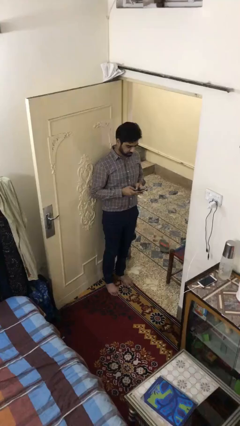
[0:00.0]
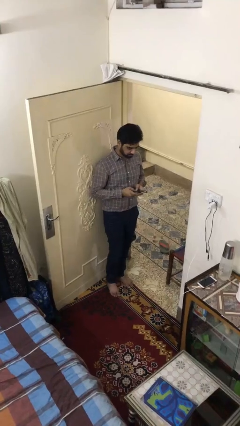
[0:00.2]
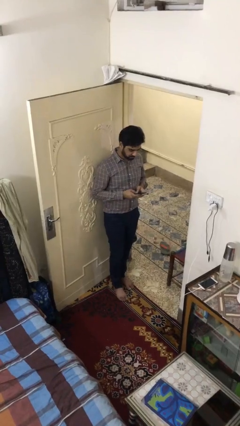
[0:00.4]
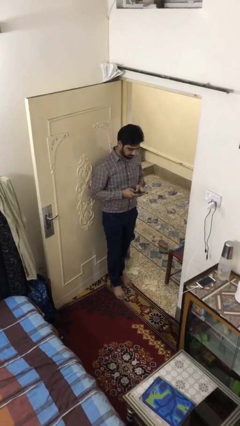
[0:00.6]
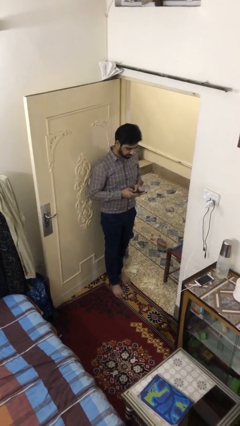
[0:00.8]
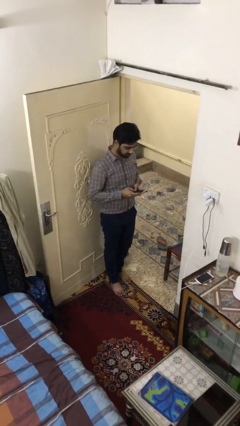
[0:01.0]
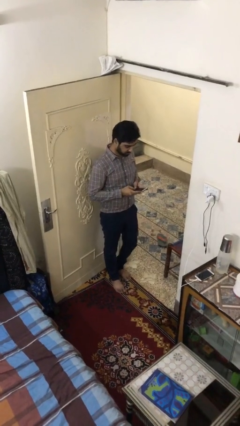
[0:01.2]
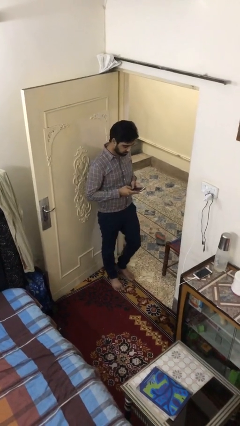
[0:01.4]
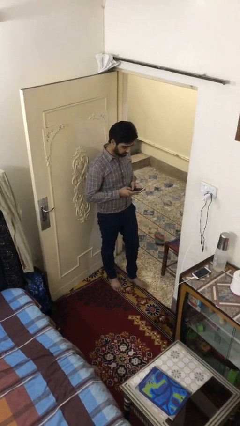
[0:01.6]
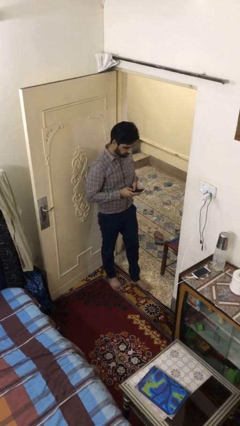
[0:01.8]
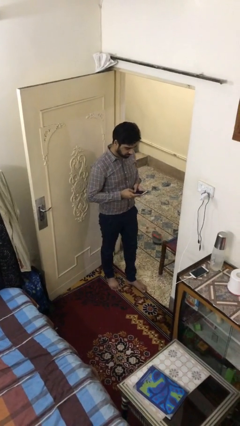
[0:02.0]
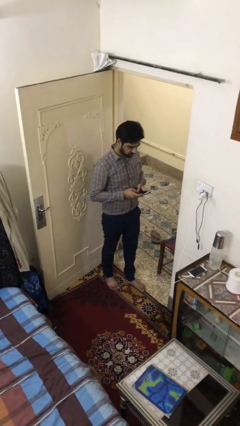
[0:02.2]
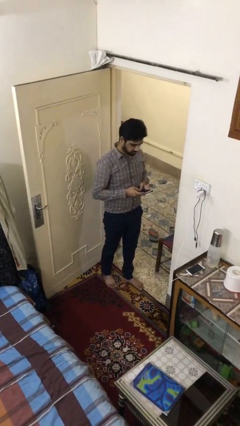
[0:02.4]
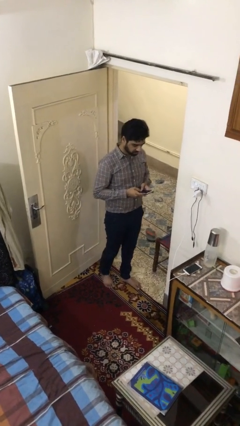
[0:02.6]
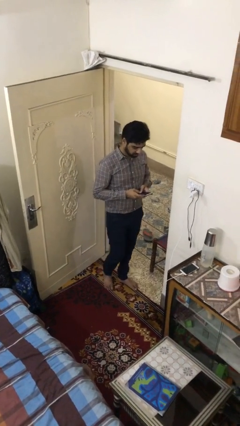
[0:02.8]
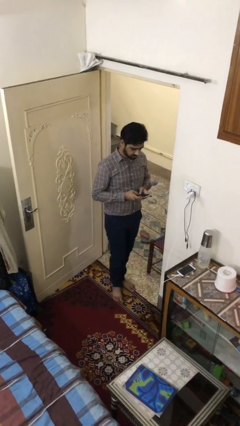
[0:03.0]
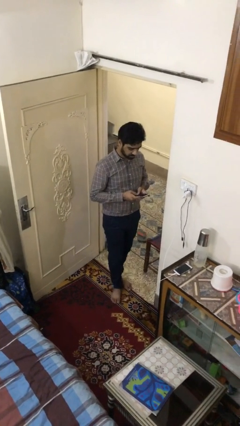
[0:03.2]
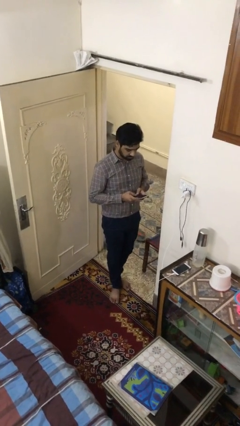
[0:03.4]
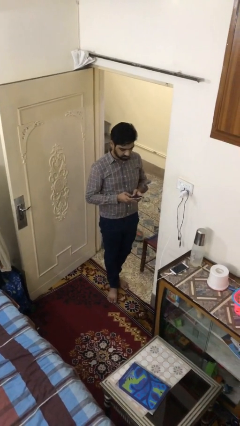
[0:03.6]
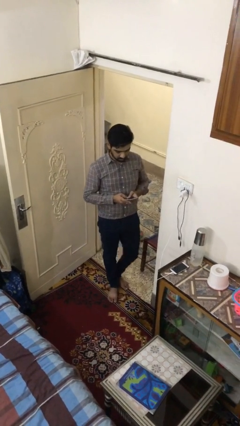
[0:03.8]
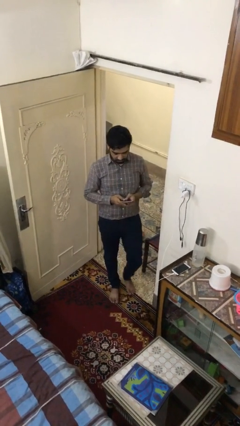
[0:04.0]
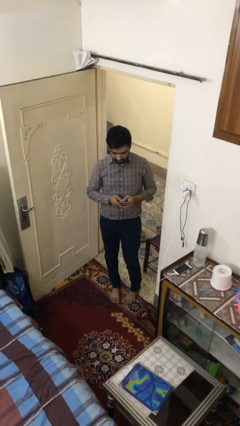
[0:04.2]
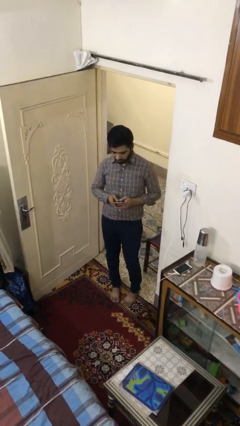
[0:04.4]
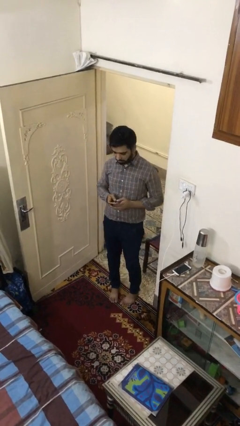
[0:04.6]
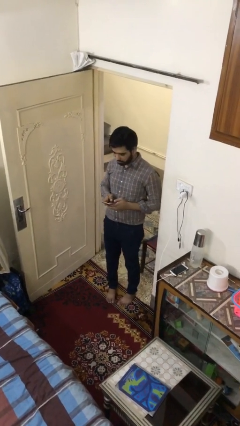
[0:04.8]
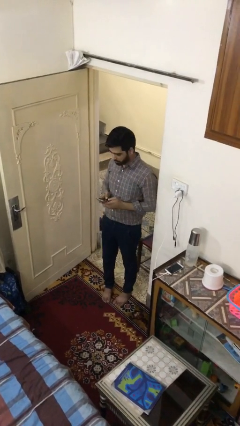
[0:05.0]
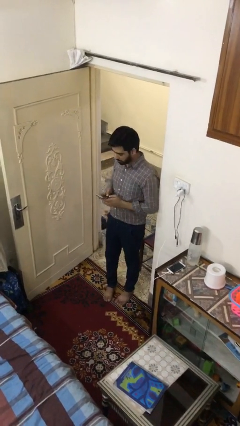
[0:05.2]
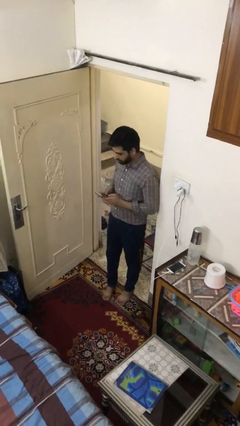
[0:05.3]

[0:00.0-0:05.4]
person texts on phone

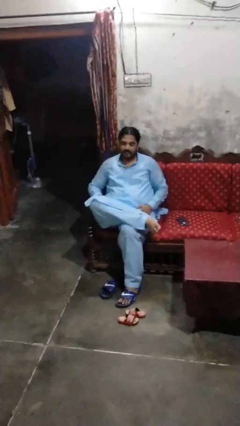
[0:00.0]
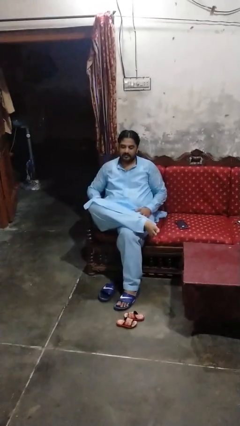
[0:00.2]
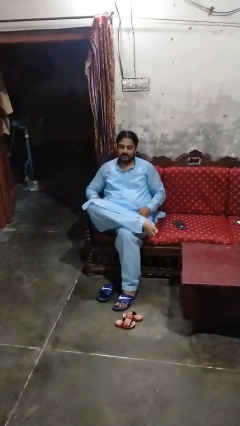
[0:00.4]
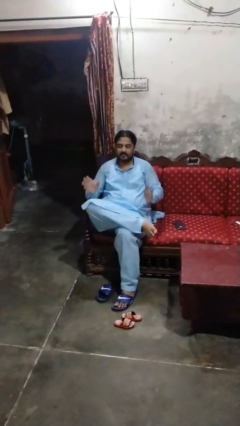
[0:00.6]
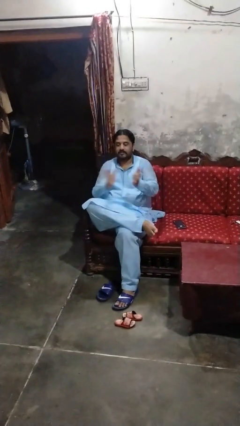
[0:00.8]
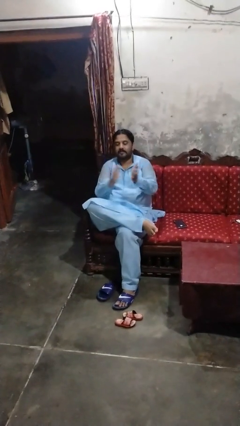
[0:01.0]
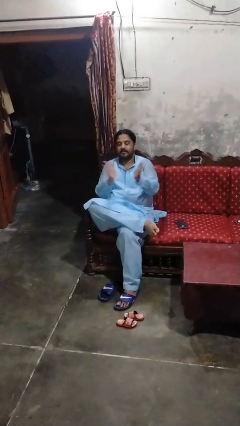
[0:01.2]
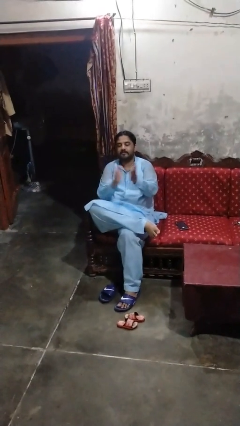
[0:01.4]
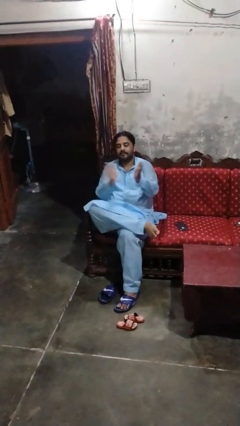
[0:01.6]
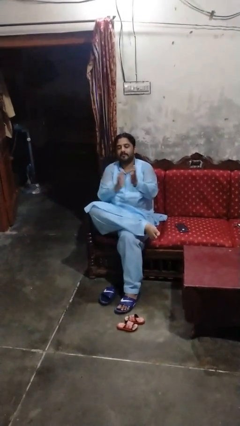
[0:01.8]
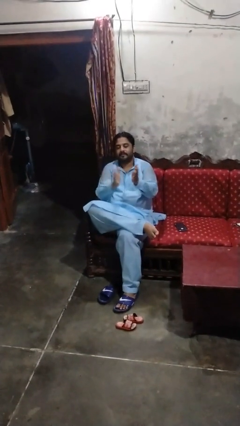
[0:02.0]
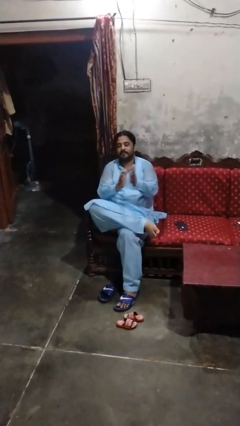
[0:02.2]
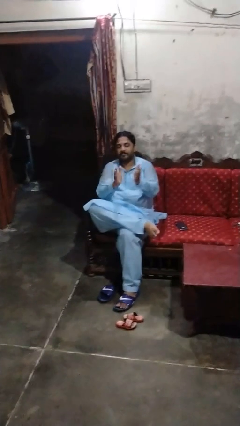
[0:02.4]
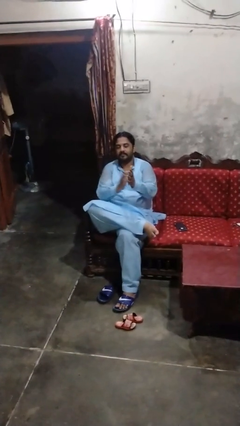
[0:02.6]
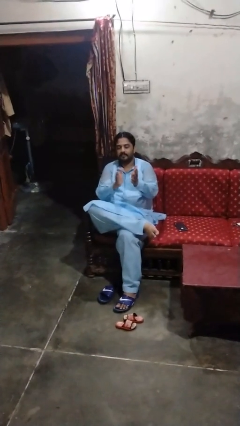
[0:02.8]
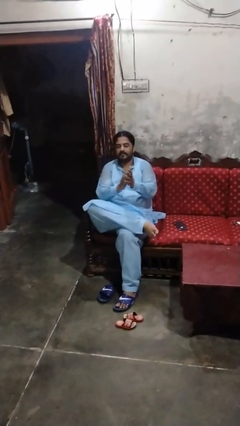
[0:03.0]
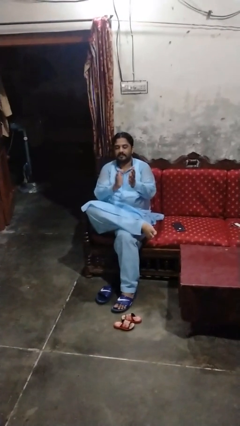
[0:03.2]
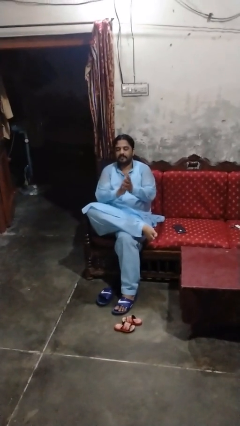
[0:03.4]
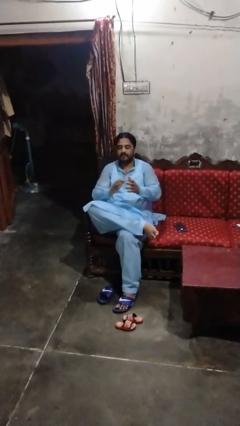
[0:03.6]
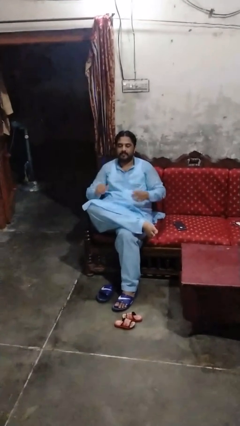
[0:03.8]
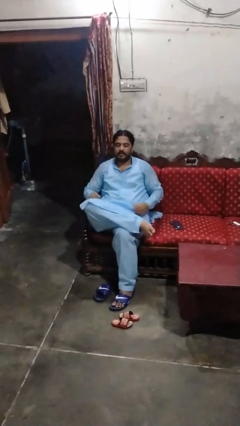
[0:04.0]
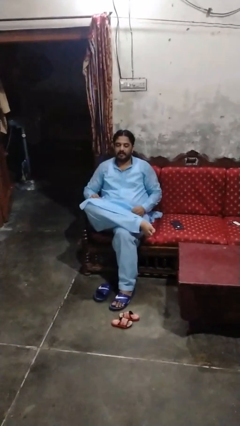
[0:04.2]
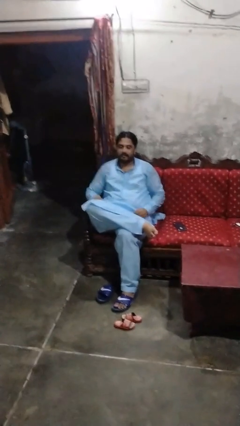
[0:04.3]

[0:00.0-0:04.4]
person claps hands

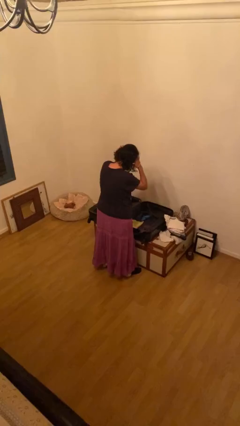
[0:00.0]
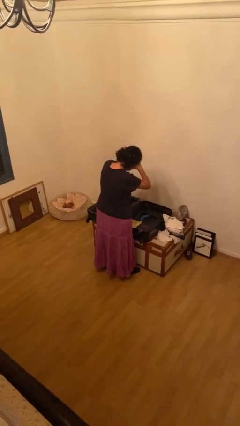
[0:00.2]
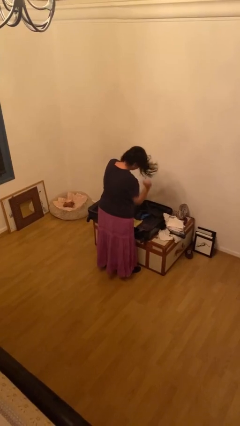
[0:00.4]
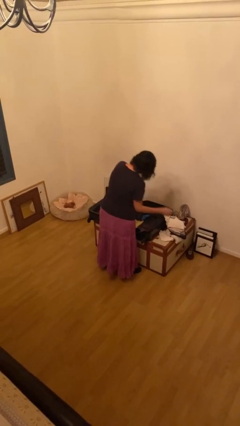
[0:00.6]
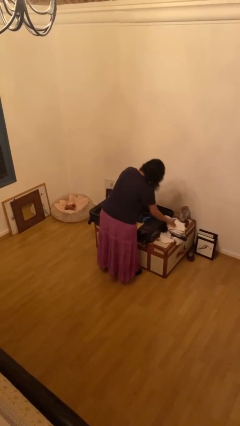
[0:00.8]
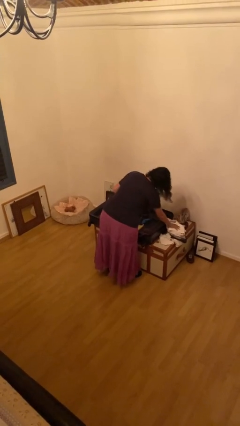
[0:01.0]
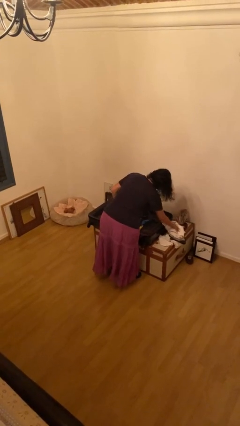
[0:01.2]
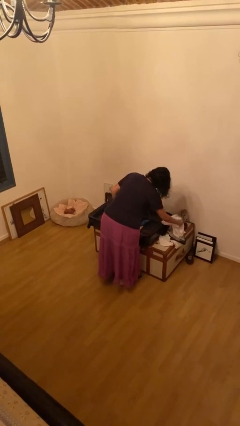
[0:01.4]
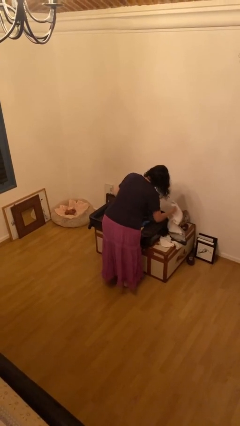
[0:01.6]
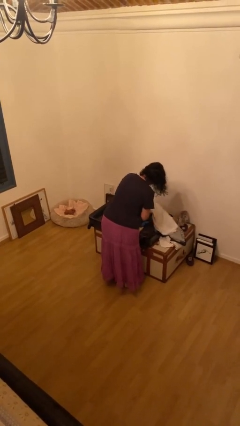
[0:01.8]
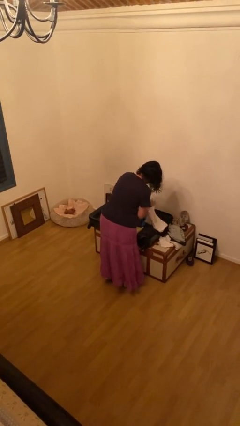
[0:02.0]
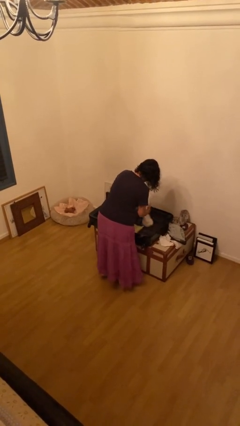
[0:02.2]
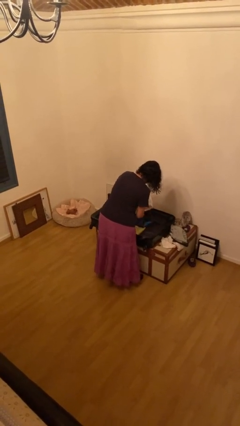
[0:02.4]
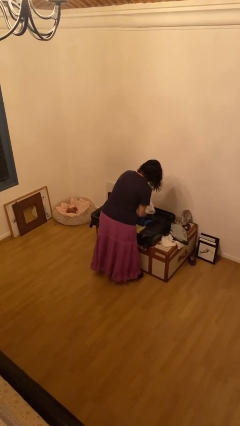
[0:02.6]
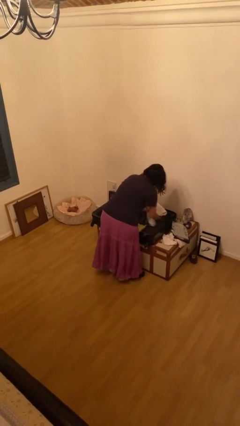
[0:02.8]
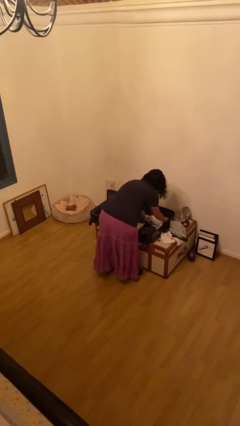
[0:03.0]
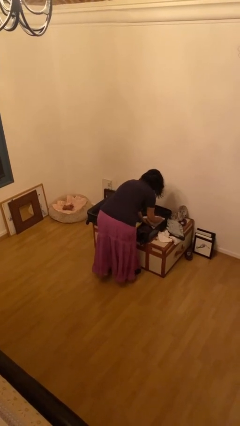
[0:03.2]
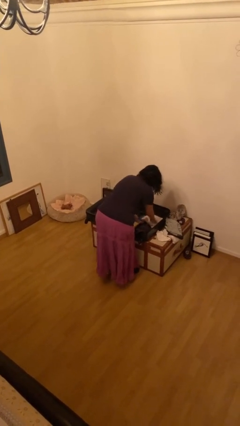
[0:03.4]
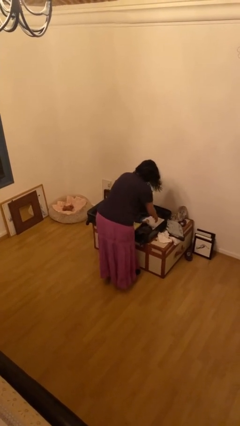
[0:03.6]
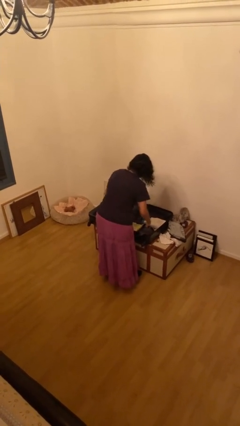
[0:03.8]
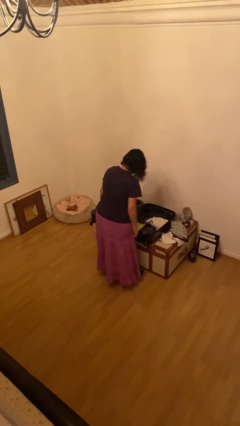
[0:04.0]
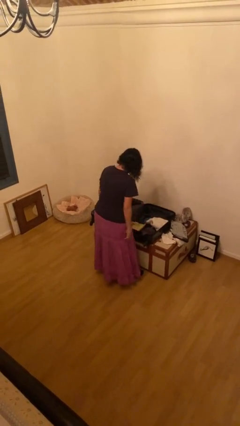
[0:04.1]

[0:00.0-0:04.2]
person unloads clothes from suitcase

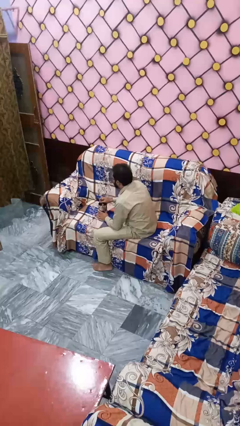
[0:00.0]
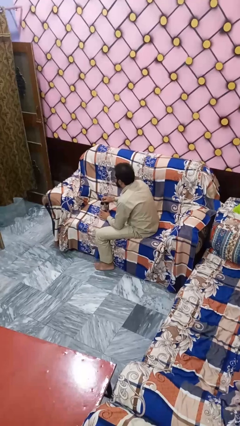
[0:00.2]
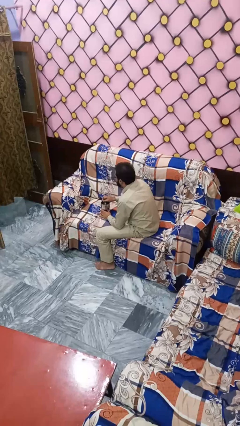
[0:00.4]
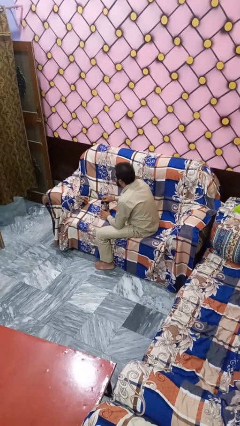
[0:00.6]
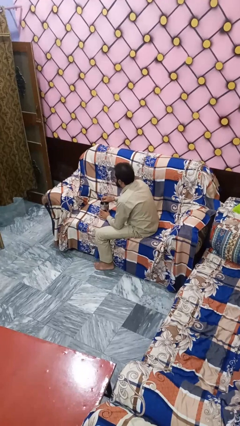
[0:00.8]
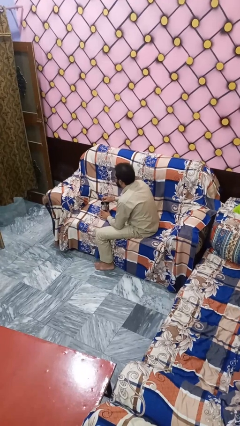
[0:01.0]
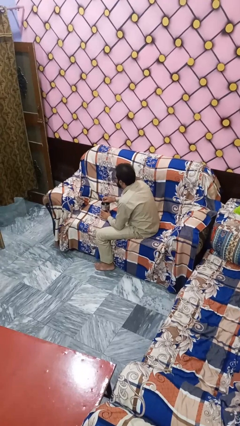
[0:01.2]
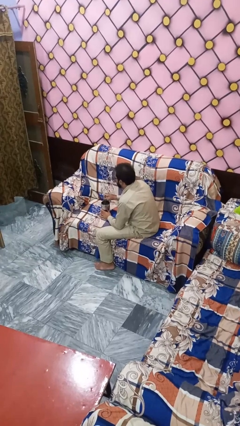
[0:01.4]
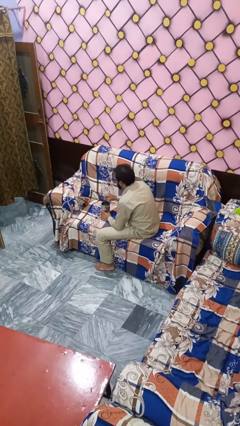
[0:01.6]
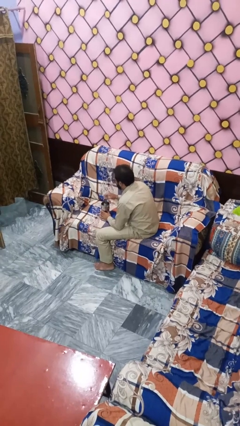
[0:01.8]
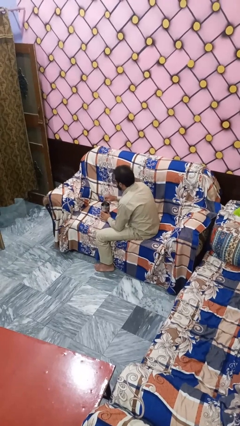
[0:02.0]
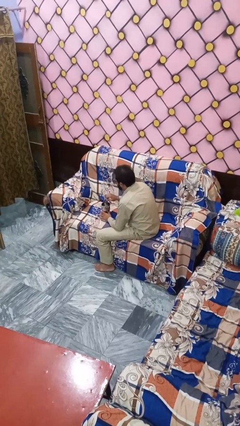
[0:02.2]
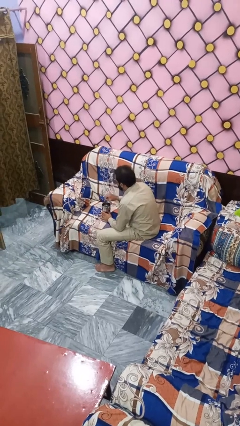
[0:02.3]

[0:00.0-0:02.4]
person stirs mug

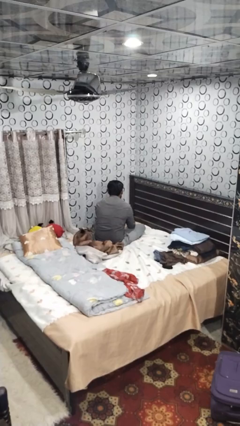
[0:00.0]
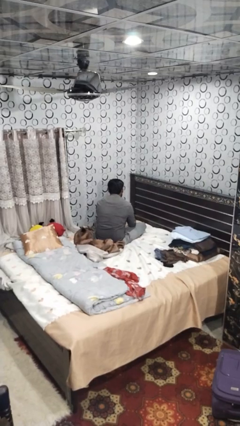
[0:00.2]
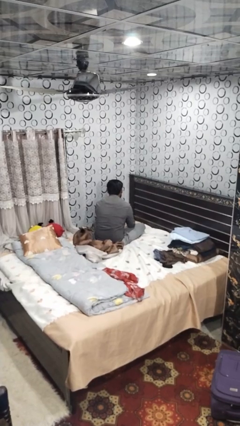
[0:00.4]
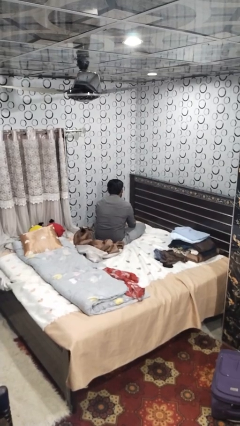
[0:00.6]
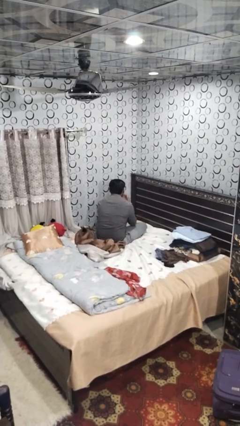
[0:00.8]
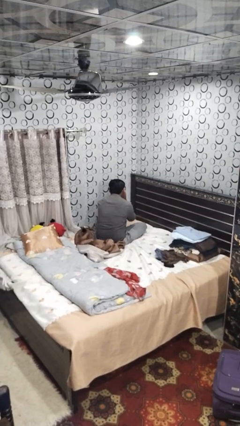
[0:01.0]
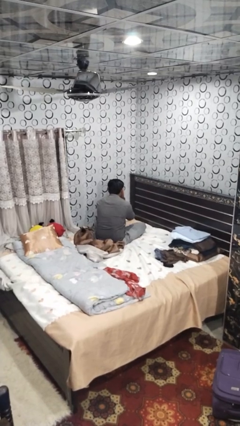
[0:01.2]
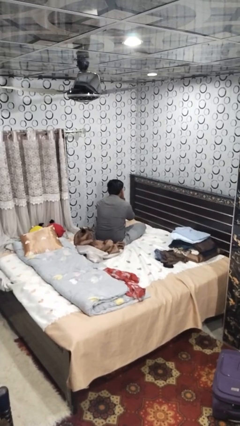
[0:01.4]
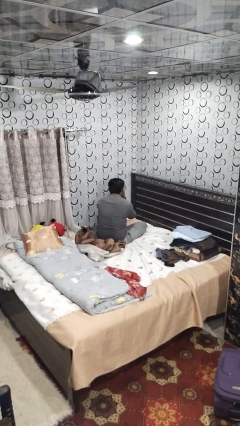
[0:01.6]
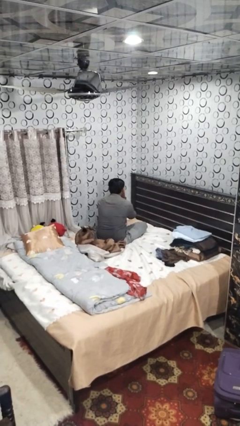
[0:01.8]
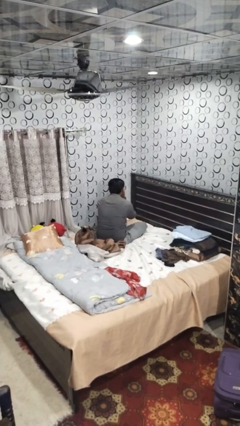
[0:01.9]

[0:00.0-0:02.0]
person covers face with hands
